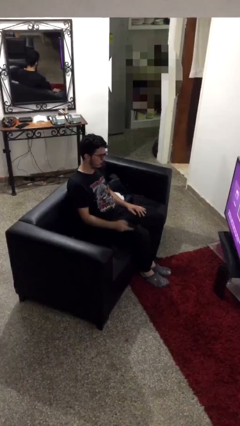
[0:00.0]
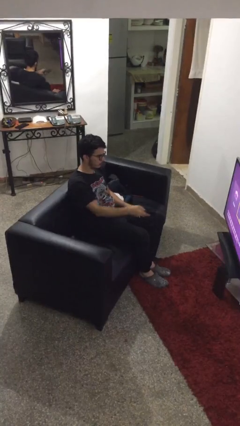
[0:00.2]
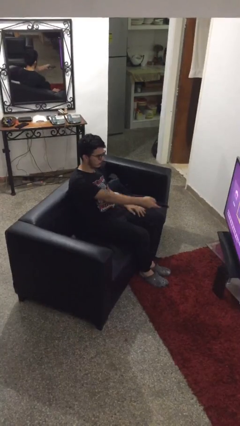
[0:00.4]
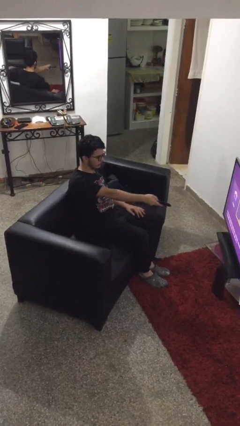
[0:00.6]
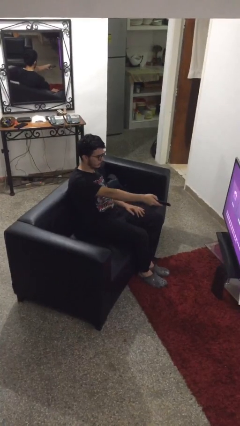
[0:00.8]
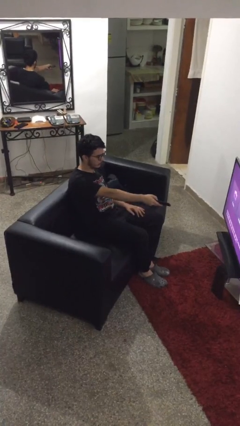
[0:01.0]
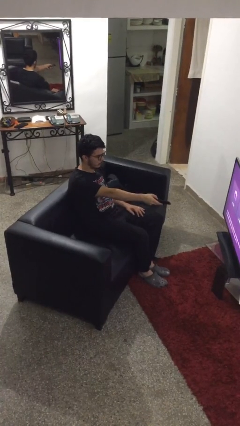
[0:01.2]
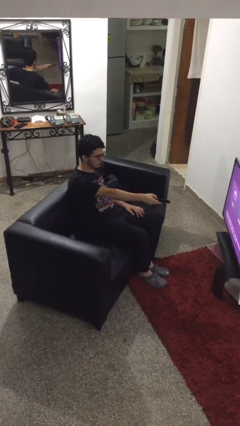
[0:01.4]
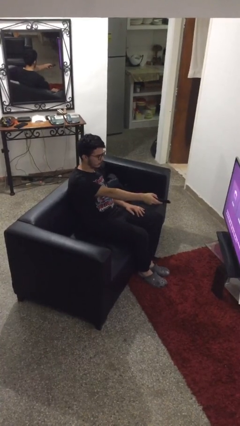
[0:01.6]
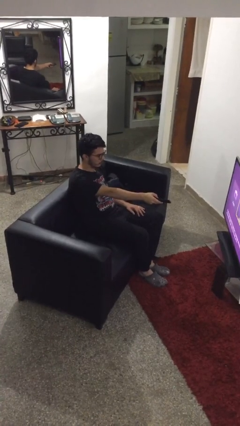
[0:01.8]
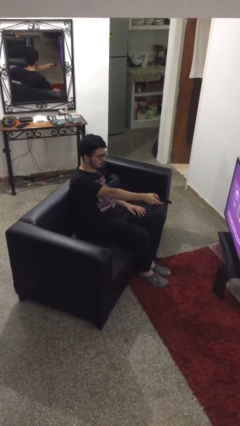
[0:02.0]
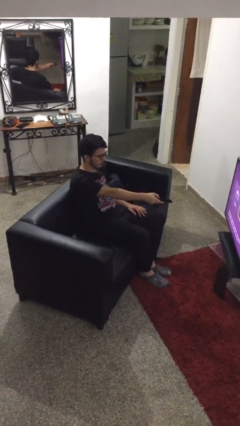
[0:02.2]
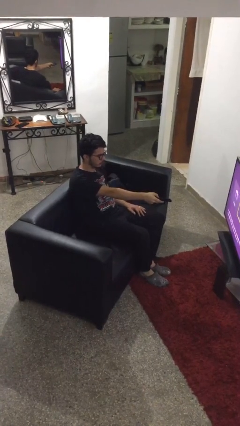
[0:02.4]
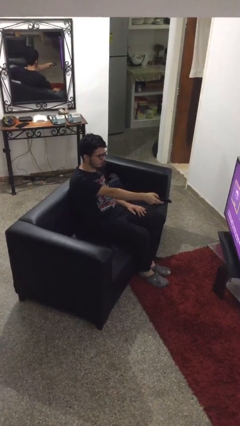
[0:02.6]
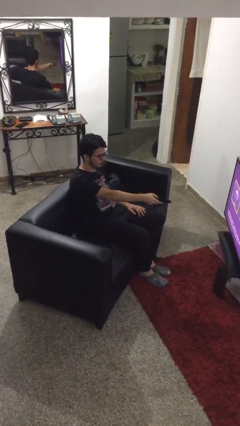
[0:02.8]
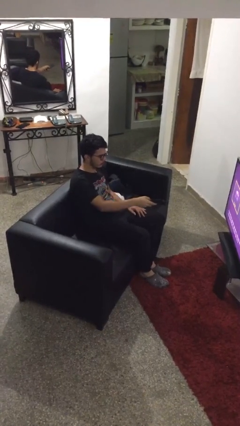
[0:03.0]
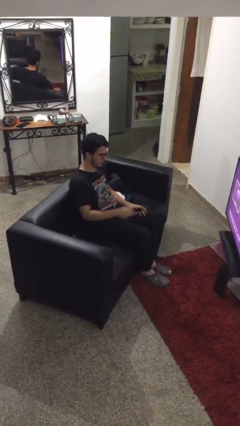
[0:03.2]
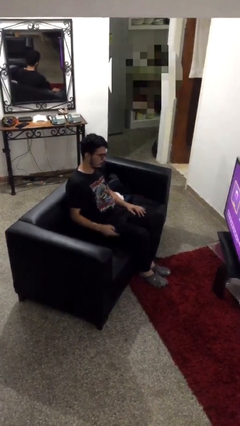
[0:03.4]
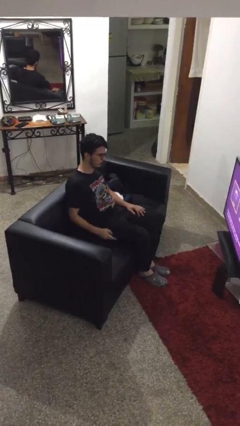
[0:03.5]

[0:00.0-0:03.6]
person uses television remote

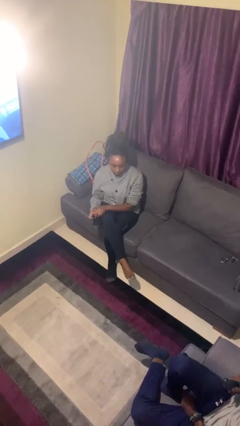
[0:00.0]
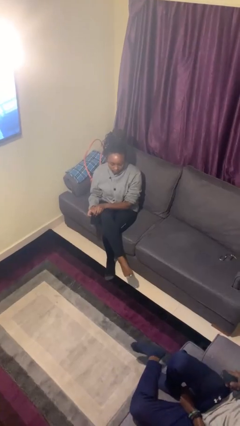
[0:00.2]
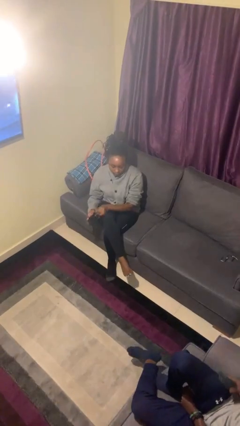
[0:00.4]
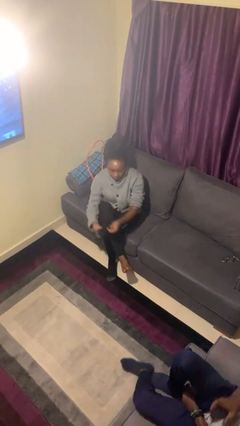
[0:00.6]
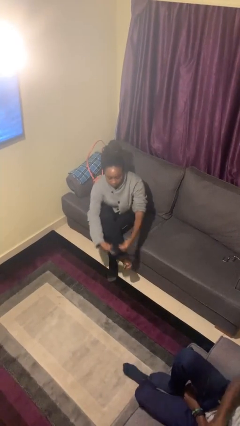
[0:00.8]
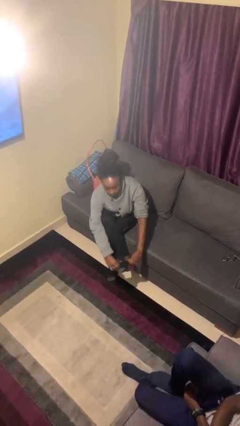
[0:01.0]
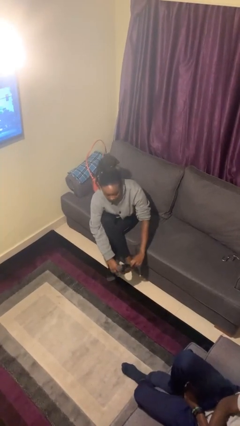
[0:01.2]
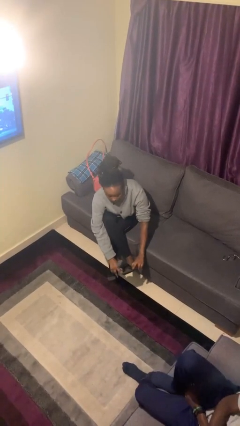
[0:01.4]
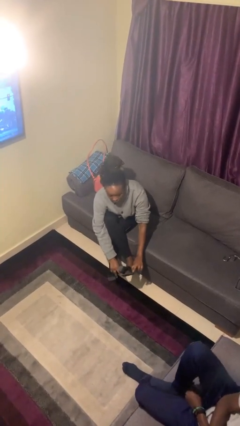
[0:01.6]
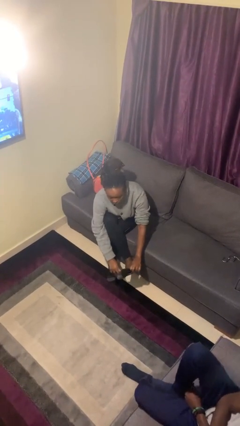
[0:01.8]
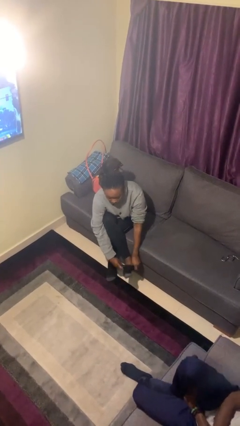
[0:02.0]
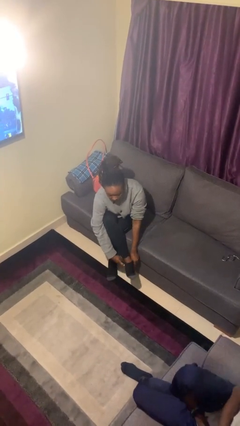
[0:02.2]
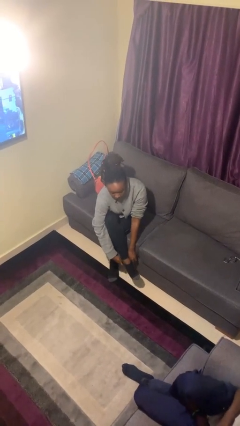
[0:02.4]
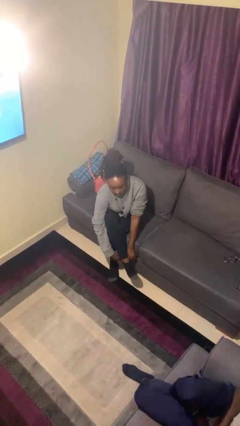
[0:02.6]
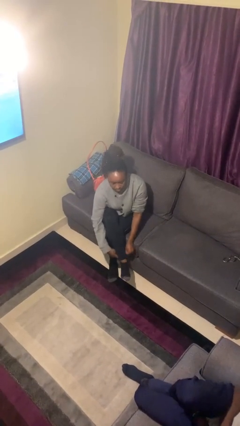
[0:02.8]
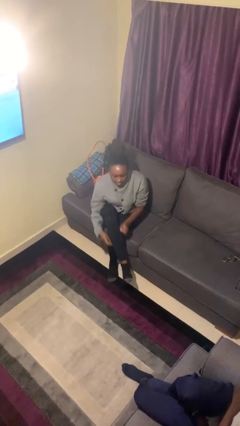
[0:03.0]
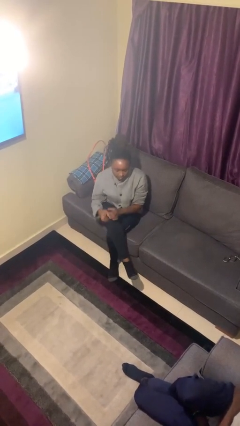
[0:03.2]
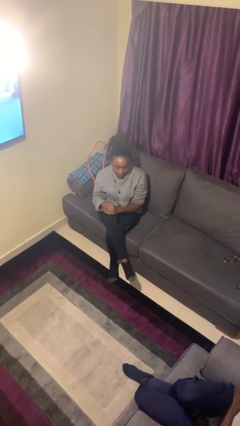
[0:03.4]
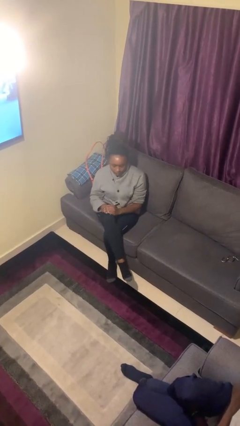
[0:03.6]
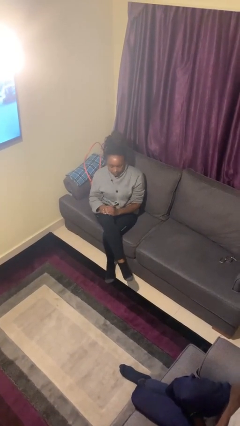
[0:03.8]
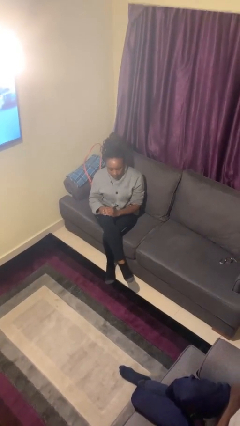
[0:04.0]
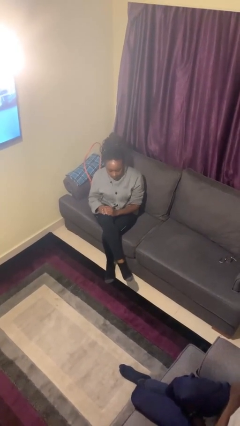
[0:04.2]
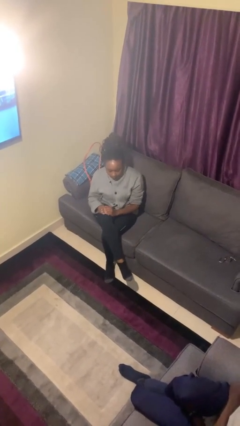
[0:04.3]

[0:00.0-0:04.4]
person puts on socks

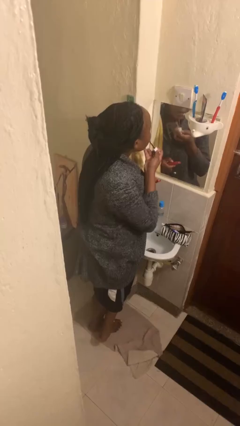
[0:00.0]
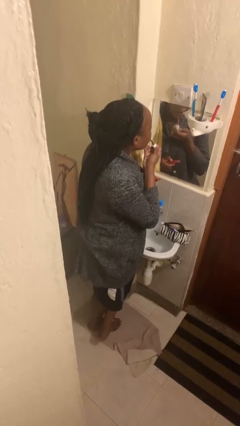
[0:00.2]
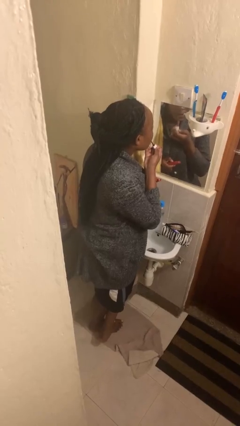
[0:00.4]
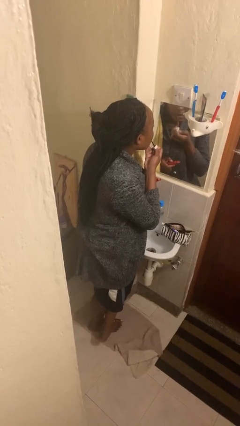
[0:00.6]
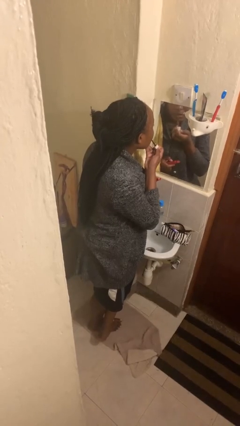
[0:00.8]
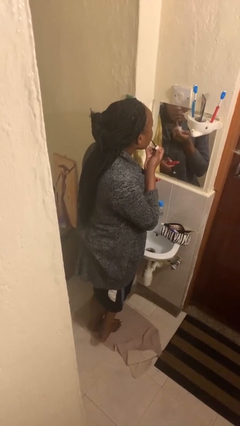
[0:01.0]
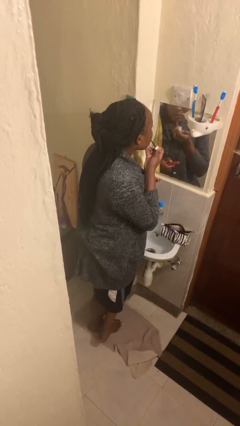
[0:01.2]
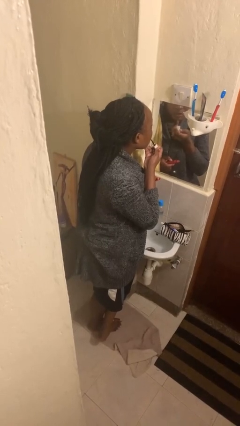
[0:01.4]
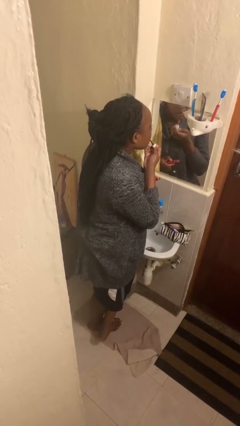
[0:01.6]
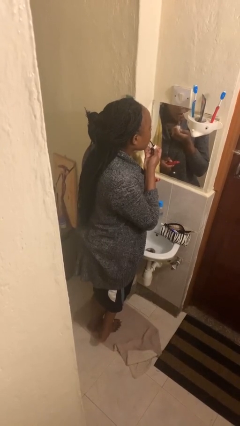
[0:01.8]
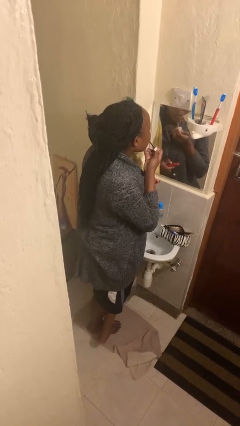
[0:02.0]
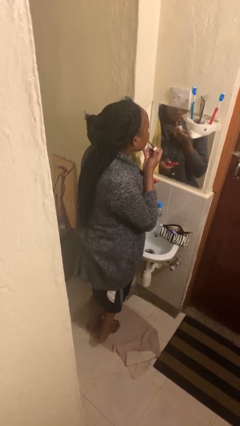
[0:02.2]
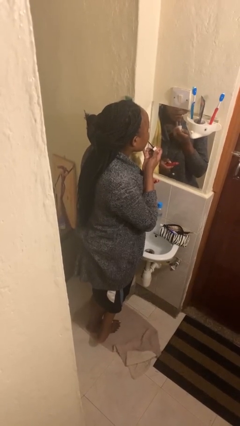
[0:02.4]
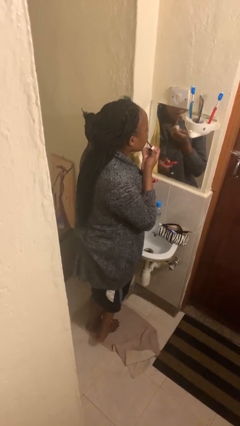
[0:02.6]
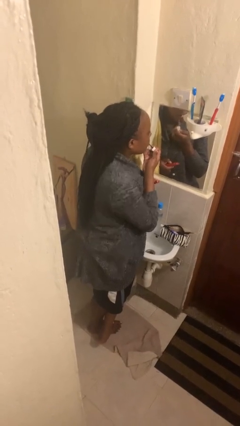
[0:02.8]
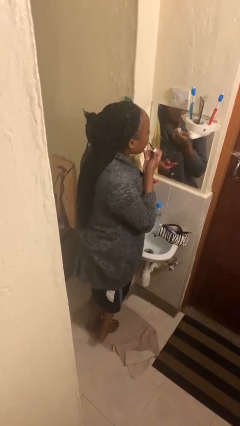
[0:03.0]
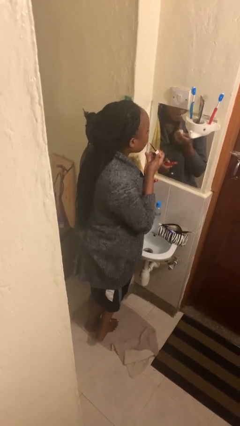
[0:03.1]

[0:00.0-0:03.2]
person applies lip makeup

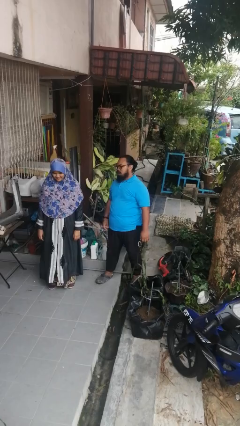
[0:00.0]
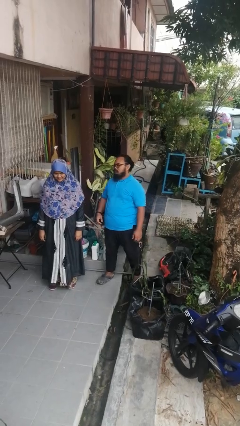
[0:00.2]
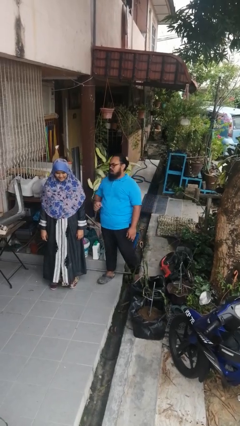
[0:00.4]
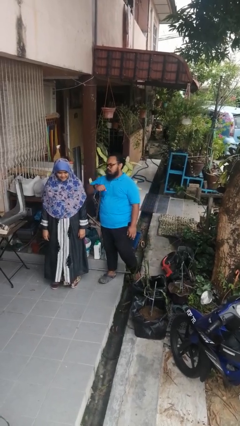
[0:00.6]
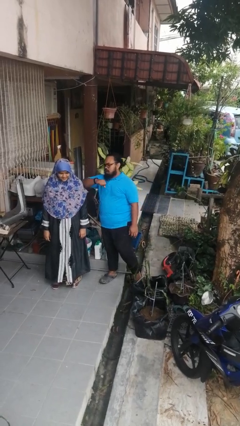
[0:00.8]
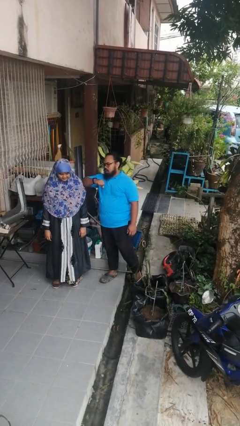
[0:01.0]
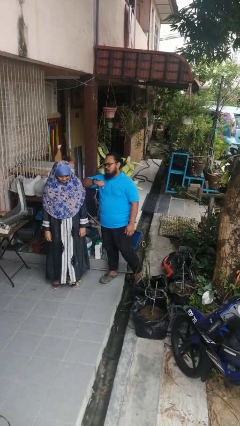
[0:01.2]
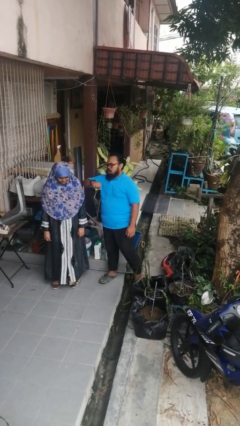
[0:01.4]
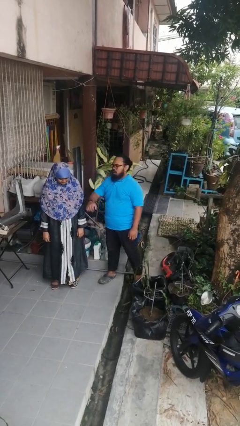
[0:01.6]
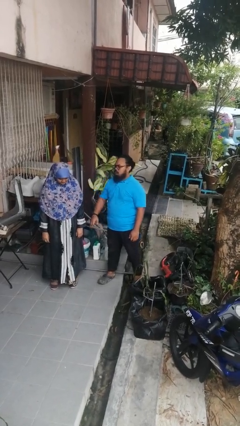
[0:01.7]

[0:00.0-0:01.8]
person nudges person with elbow

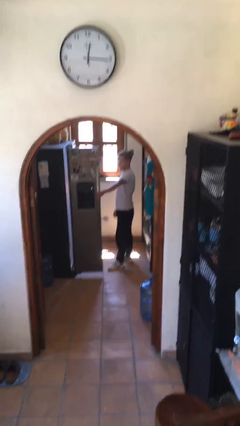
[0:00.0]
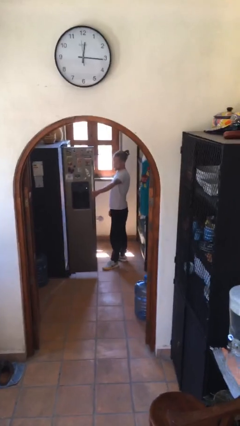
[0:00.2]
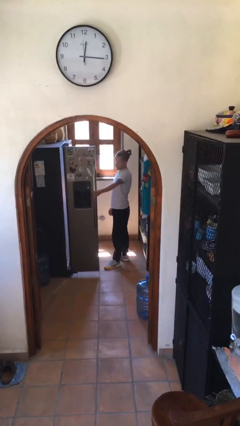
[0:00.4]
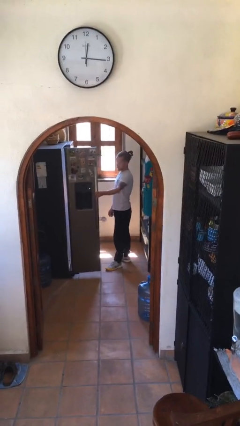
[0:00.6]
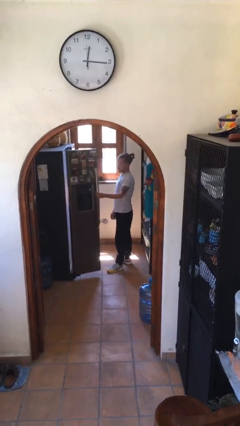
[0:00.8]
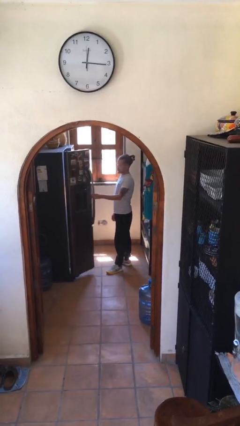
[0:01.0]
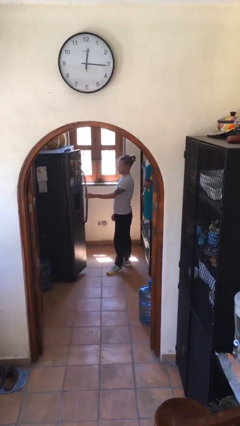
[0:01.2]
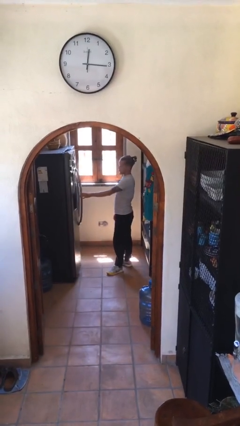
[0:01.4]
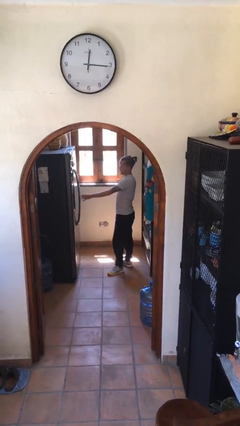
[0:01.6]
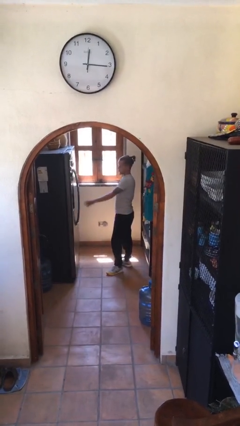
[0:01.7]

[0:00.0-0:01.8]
person closes refrigerator

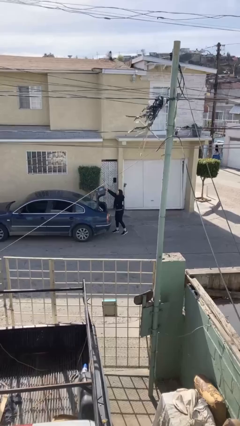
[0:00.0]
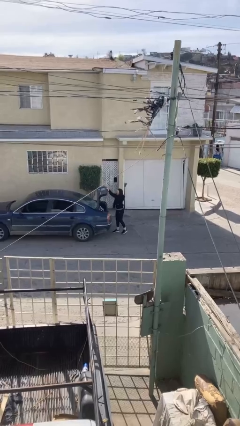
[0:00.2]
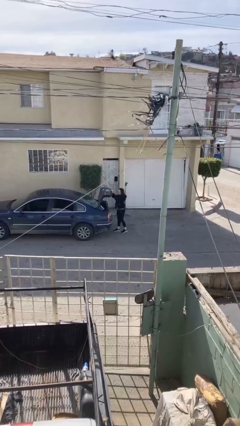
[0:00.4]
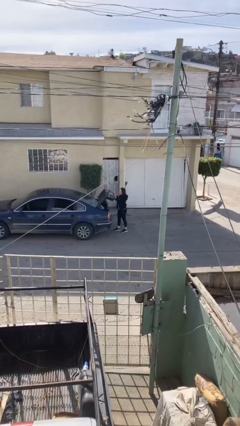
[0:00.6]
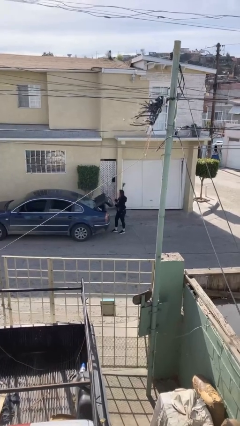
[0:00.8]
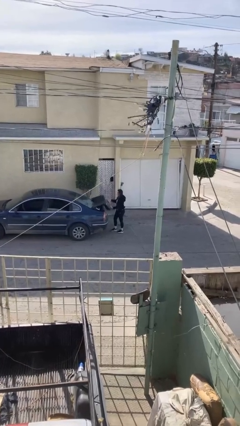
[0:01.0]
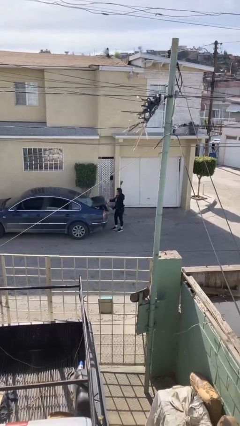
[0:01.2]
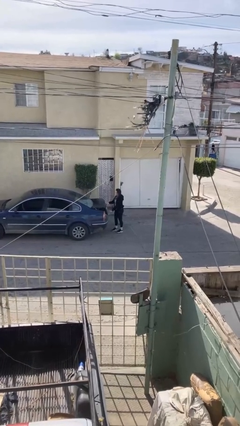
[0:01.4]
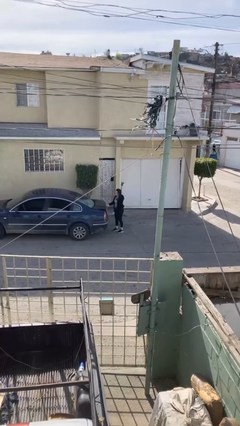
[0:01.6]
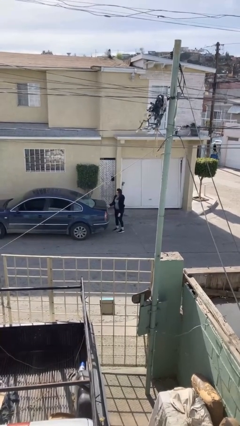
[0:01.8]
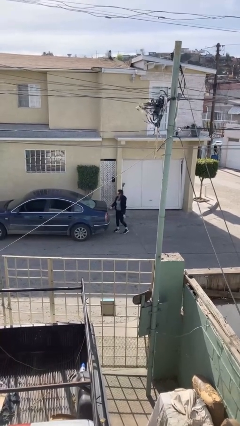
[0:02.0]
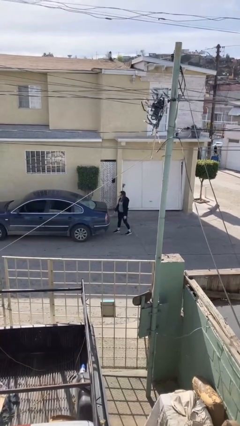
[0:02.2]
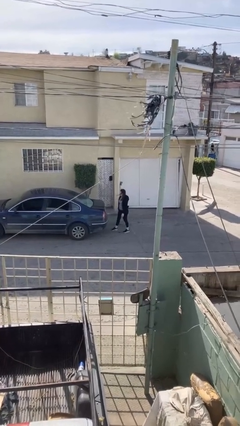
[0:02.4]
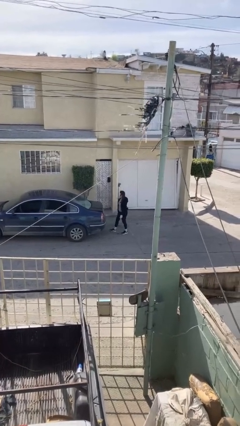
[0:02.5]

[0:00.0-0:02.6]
person closes car trunk
